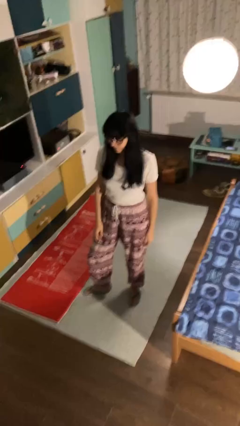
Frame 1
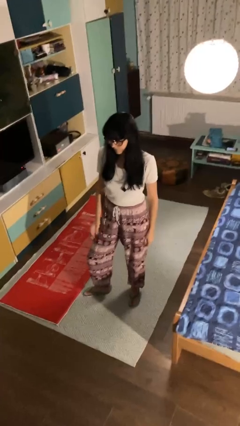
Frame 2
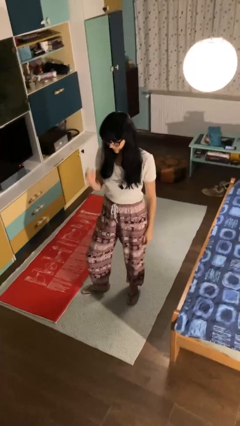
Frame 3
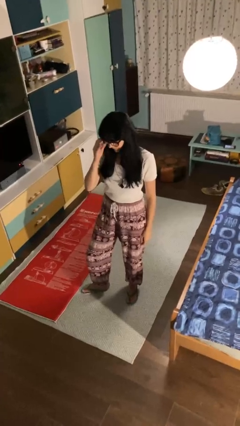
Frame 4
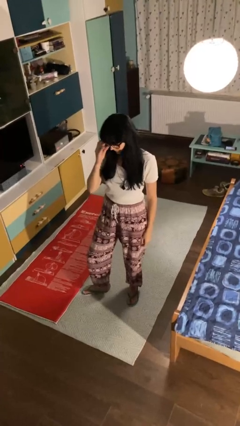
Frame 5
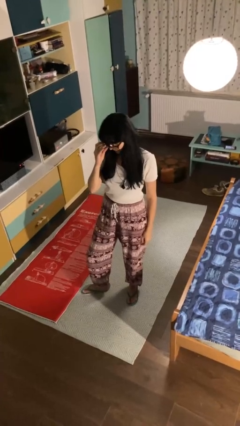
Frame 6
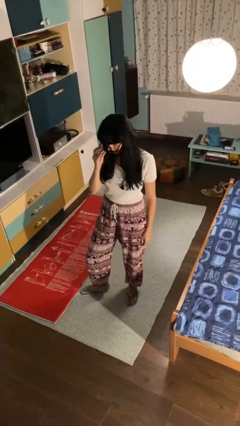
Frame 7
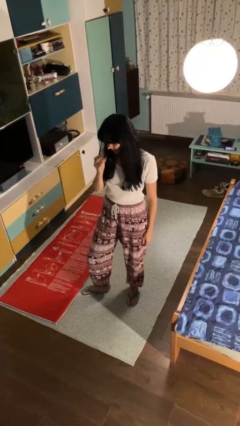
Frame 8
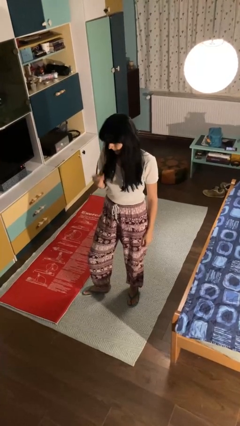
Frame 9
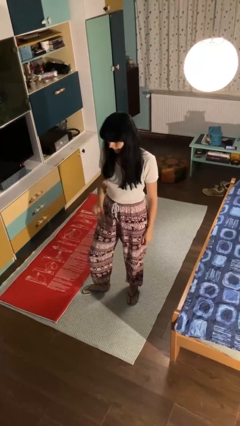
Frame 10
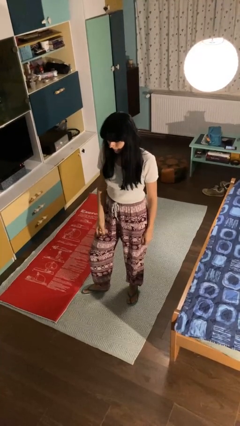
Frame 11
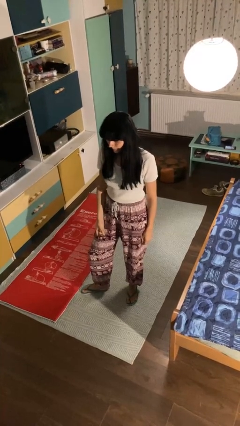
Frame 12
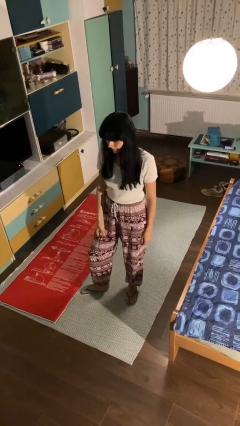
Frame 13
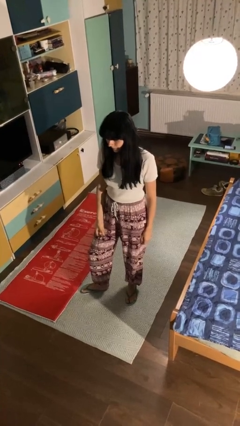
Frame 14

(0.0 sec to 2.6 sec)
person takes off glasses

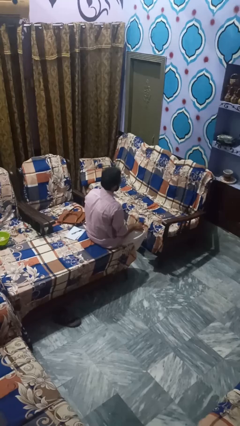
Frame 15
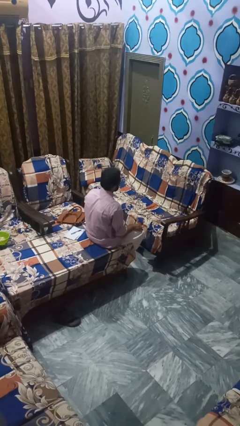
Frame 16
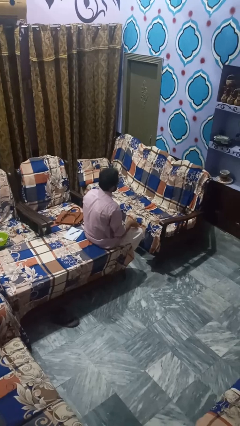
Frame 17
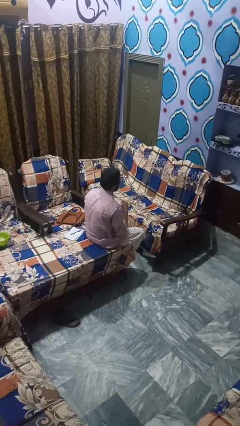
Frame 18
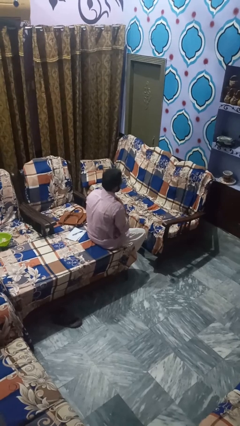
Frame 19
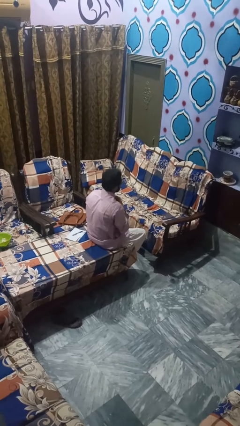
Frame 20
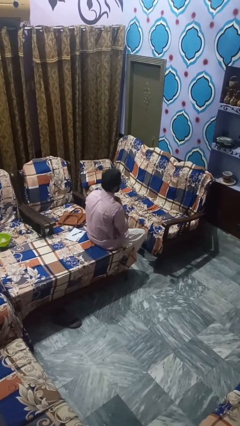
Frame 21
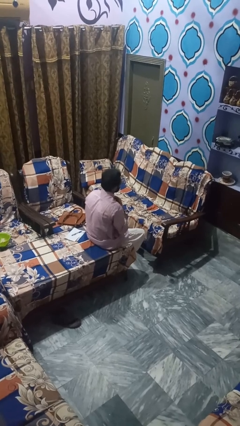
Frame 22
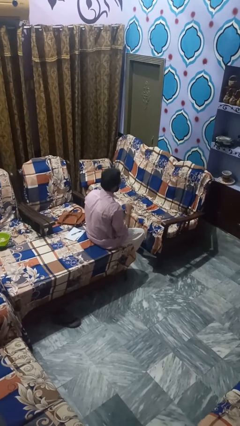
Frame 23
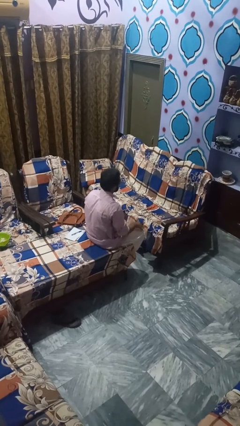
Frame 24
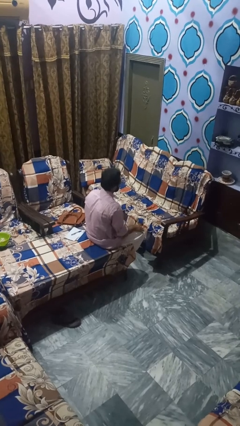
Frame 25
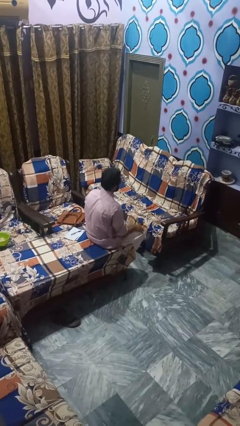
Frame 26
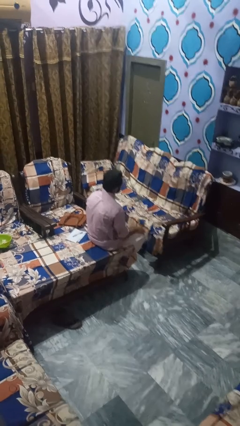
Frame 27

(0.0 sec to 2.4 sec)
person buttons shirt

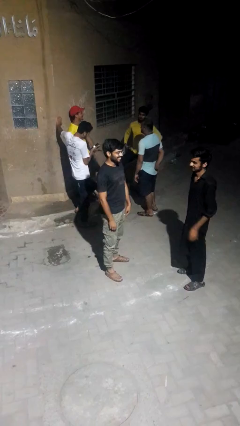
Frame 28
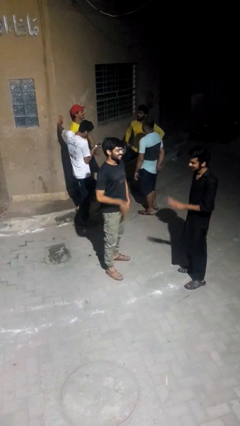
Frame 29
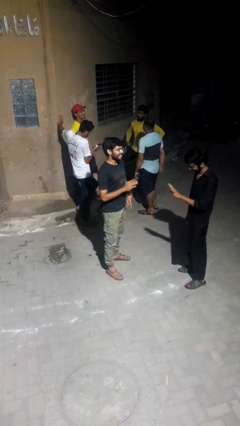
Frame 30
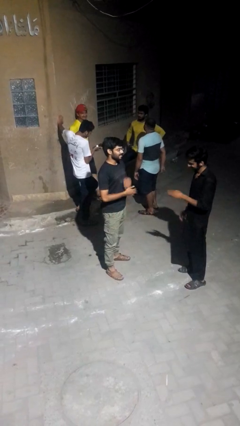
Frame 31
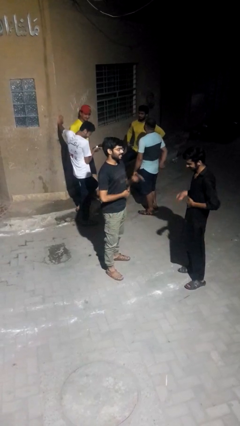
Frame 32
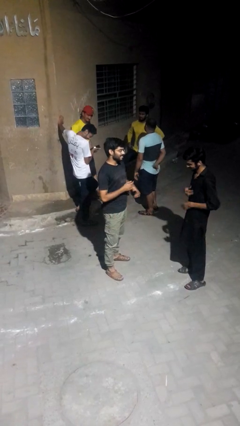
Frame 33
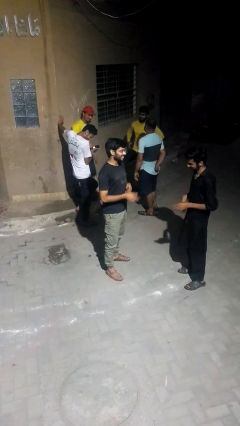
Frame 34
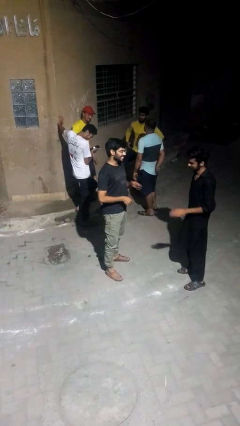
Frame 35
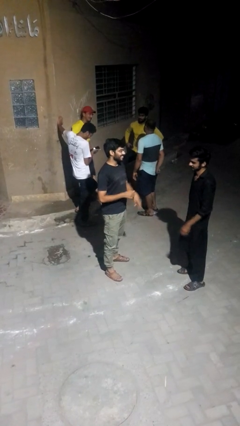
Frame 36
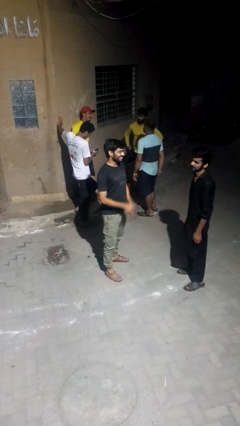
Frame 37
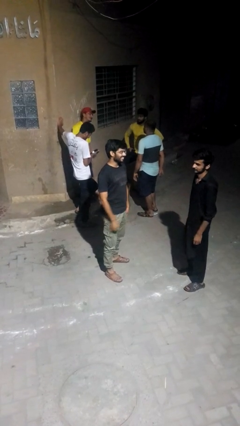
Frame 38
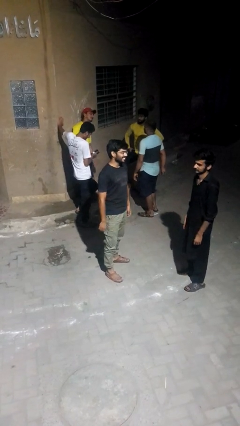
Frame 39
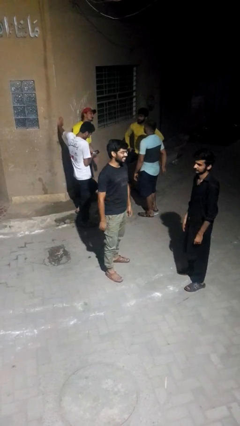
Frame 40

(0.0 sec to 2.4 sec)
person talks to person

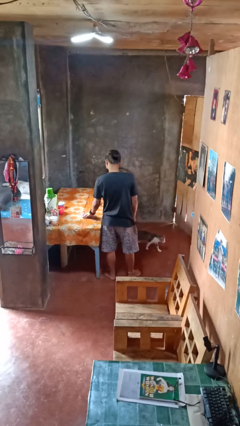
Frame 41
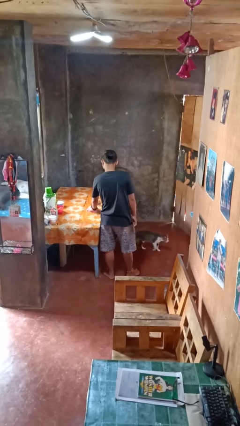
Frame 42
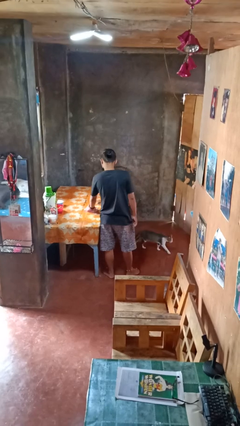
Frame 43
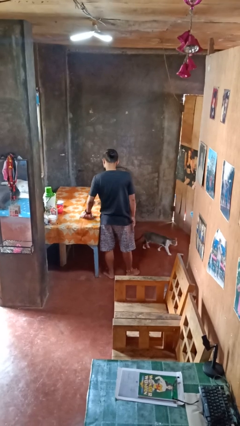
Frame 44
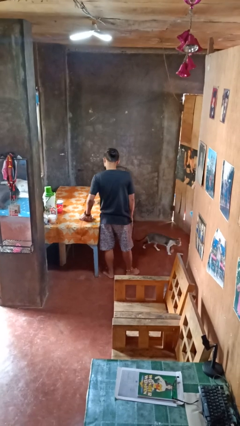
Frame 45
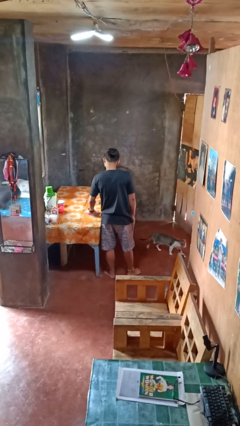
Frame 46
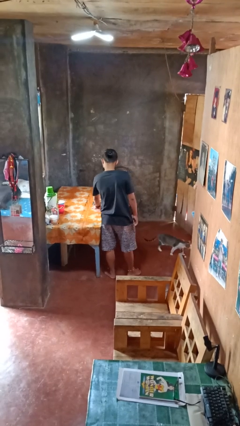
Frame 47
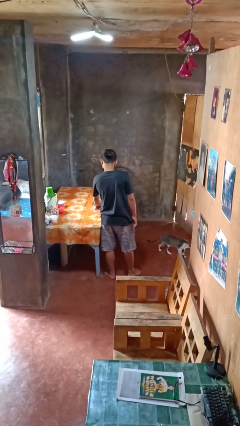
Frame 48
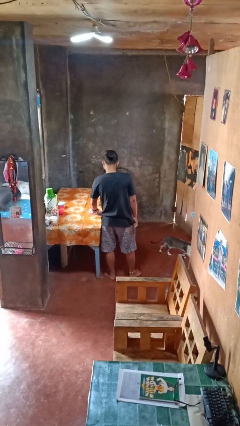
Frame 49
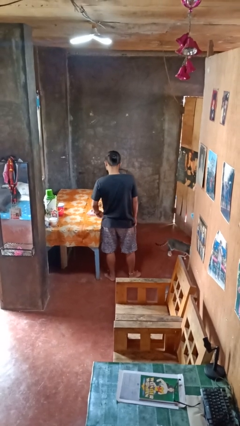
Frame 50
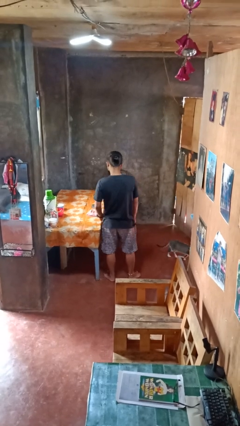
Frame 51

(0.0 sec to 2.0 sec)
person cleans table with rag

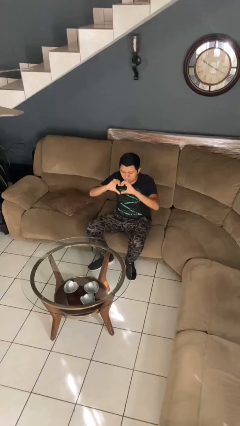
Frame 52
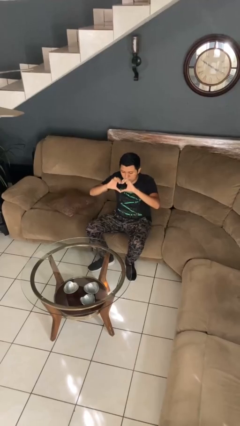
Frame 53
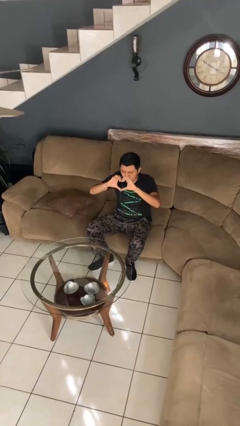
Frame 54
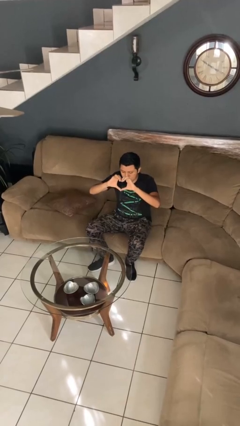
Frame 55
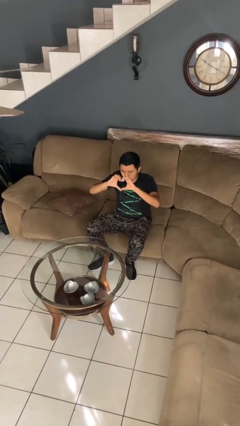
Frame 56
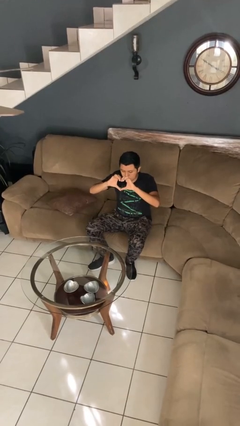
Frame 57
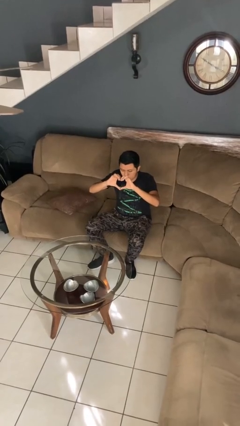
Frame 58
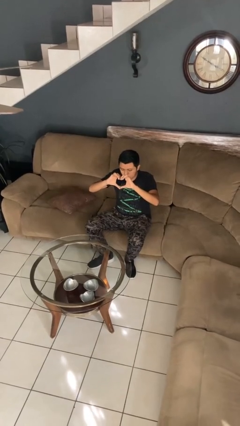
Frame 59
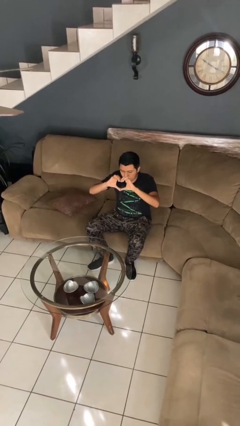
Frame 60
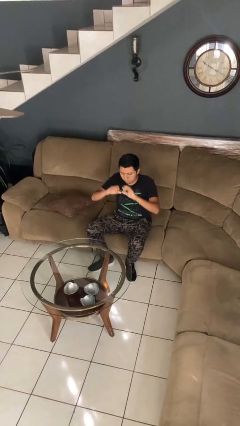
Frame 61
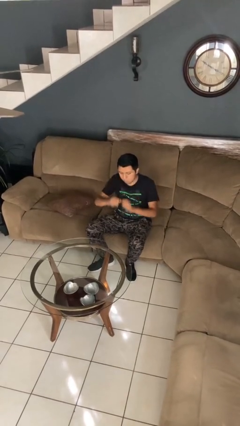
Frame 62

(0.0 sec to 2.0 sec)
person gestures heart

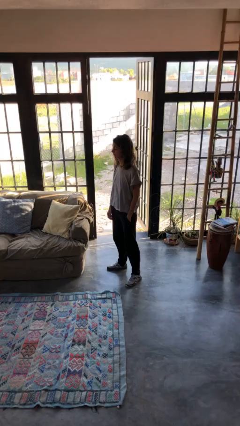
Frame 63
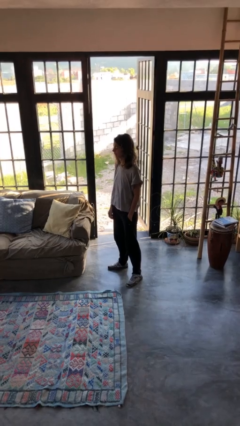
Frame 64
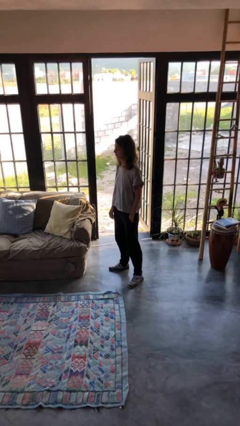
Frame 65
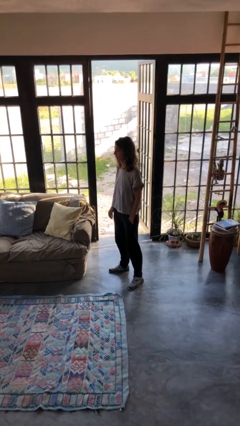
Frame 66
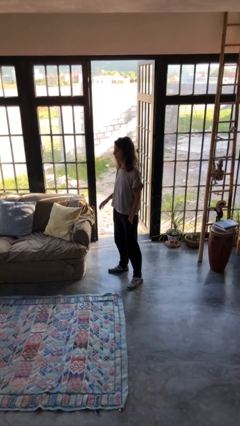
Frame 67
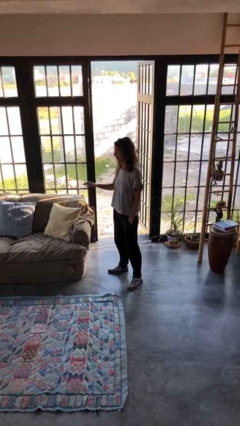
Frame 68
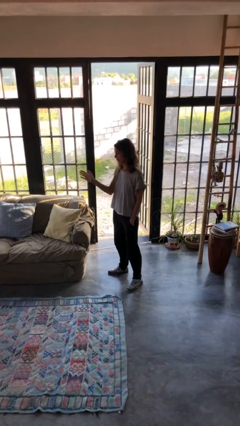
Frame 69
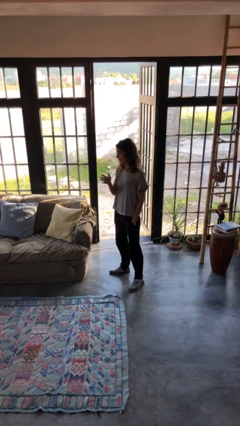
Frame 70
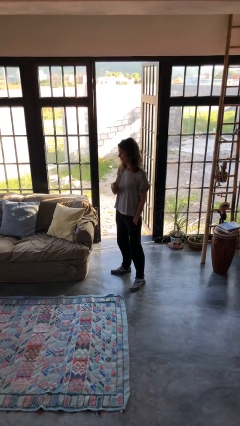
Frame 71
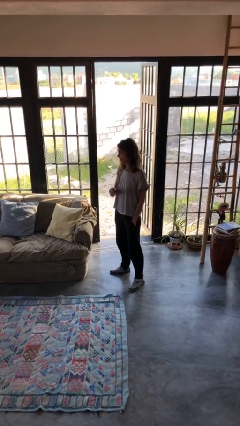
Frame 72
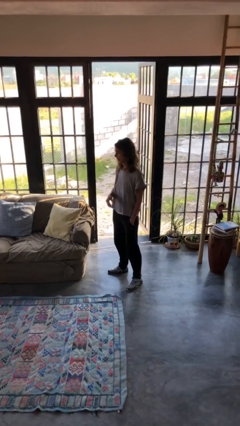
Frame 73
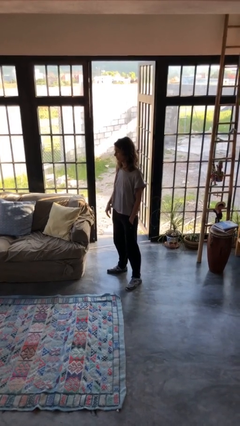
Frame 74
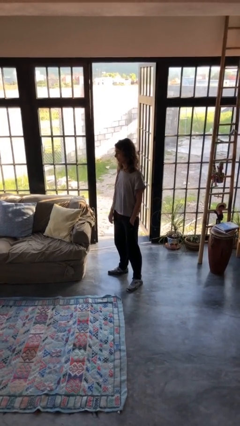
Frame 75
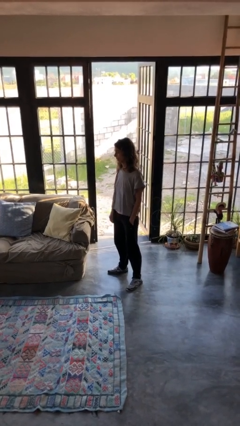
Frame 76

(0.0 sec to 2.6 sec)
person gestures swipe left

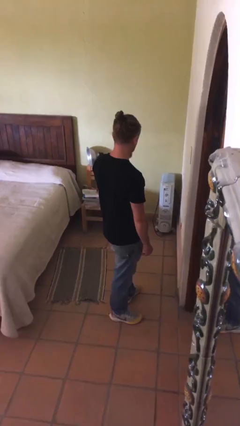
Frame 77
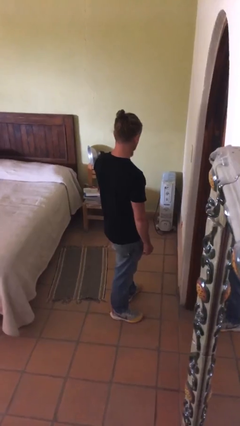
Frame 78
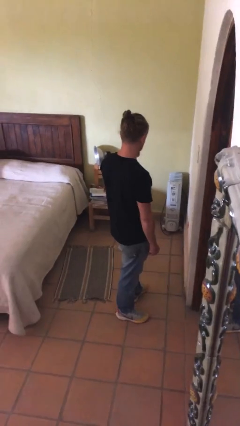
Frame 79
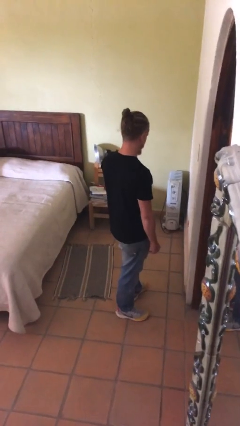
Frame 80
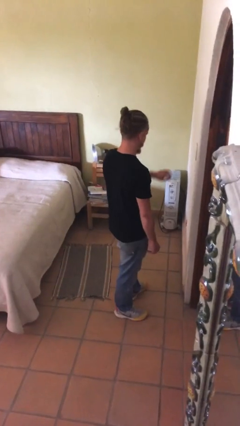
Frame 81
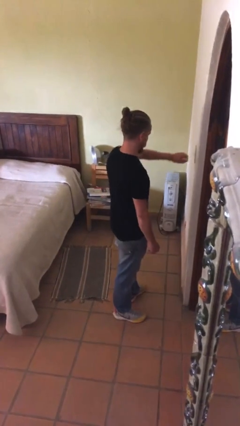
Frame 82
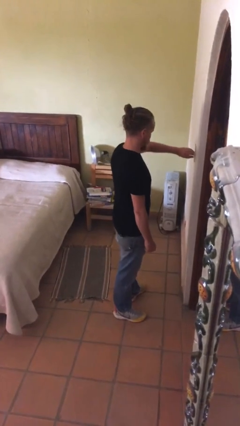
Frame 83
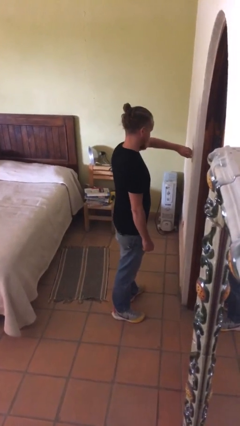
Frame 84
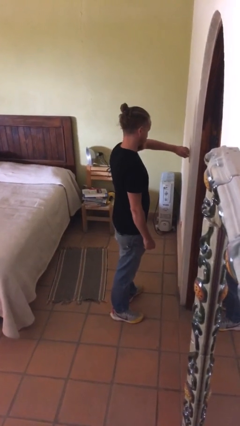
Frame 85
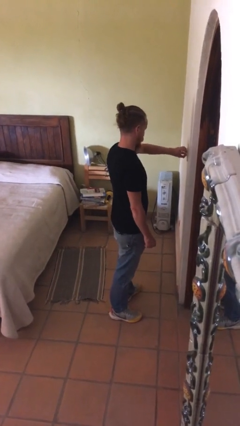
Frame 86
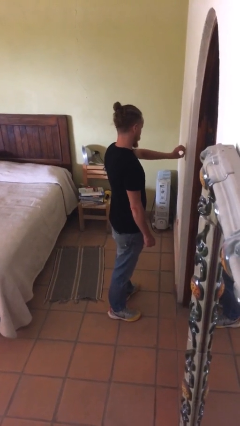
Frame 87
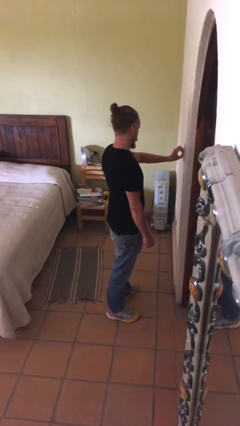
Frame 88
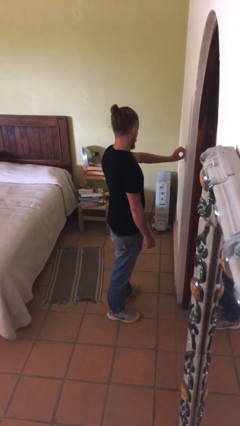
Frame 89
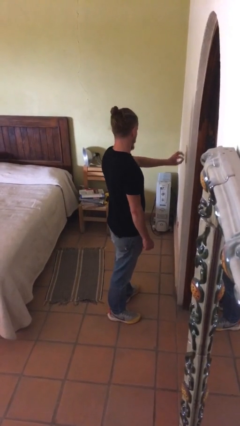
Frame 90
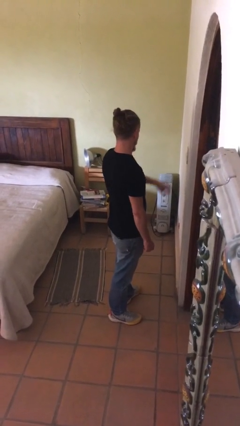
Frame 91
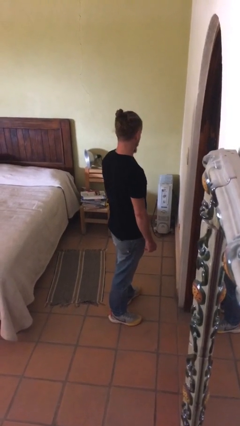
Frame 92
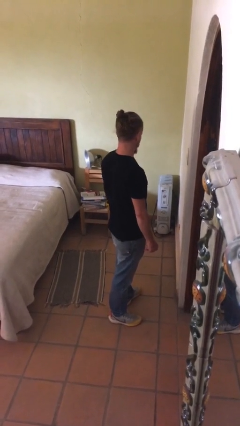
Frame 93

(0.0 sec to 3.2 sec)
person adjusts thermostat
